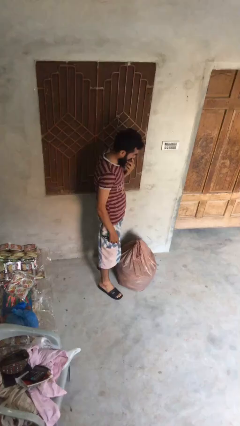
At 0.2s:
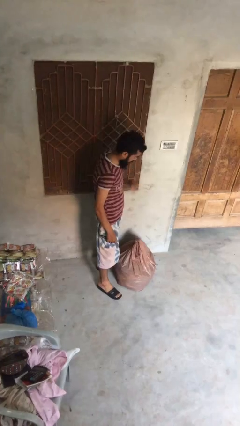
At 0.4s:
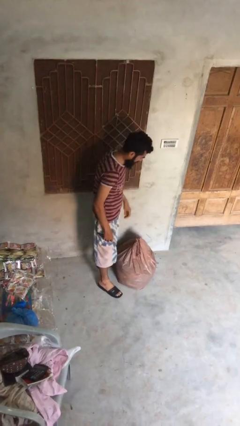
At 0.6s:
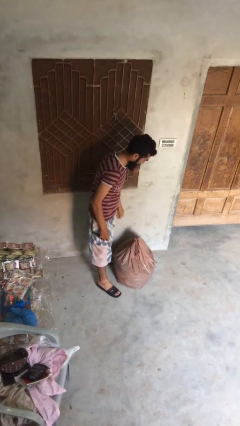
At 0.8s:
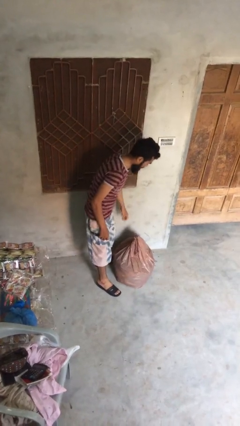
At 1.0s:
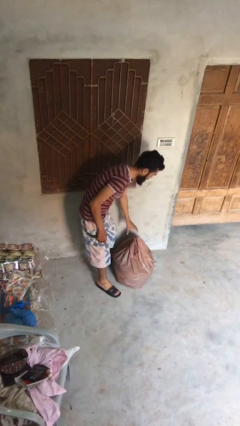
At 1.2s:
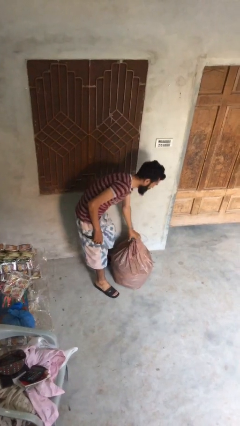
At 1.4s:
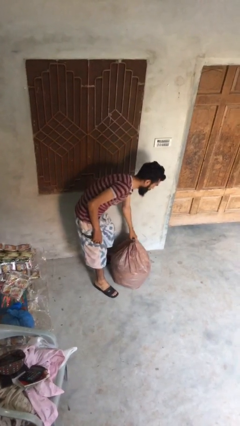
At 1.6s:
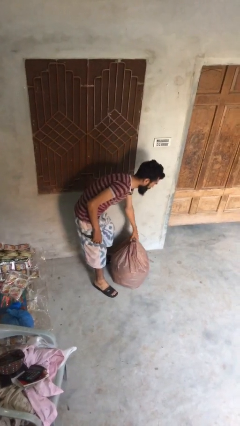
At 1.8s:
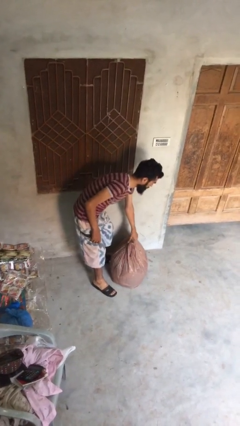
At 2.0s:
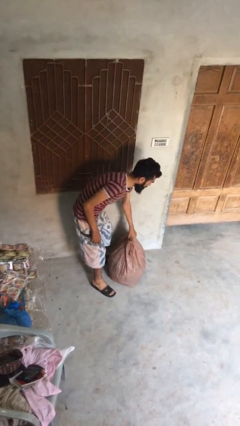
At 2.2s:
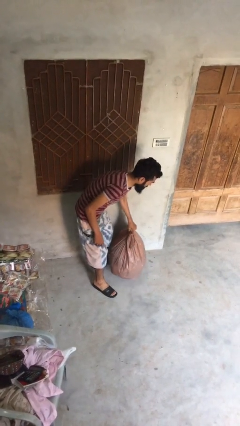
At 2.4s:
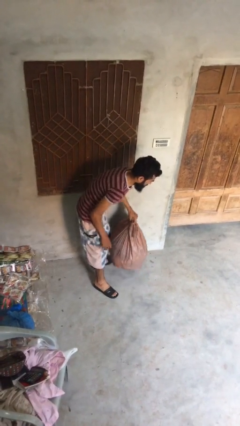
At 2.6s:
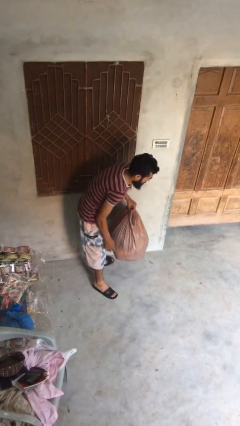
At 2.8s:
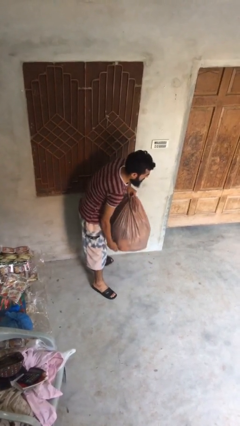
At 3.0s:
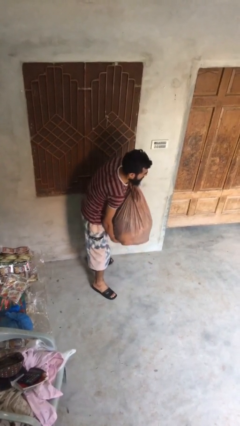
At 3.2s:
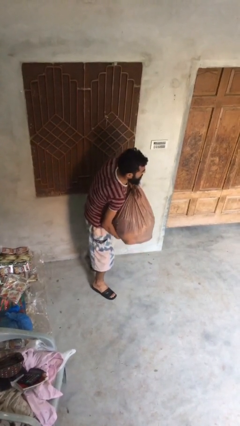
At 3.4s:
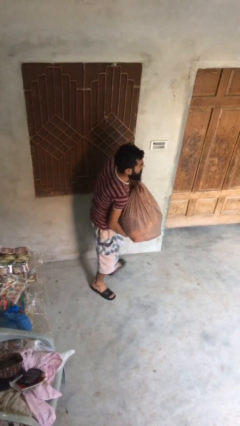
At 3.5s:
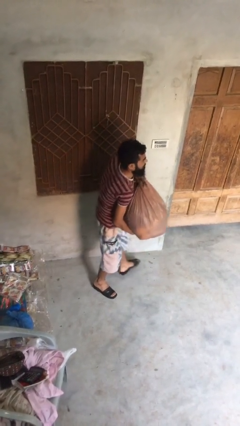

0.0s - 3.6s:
person picks up object from floor

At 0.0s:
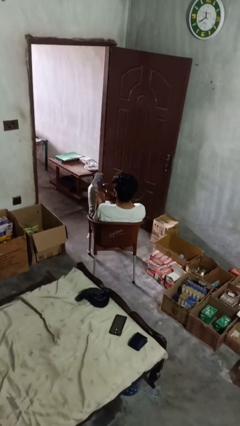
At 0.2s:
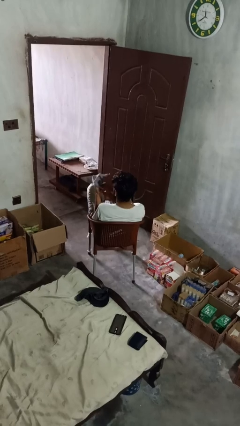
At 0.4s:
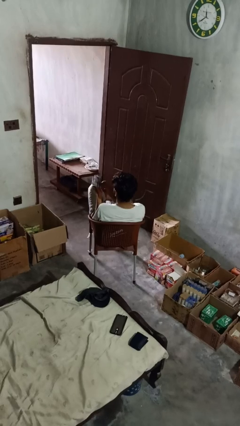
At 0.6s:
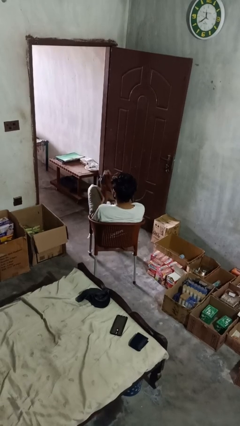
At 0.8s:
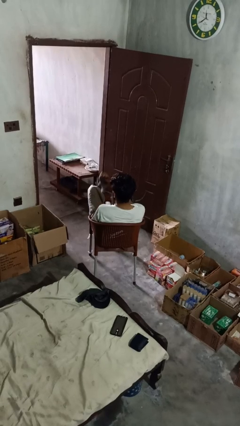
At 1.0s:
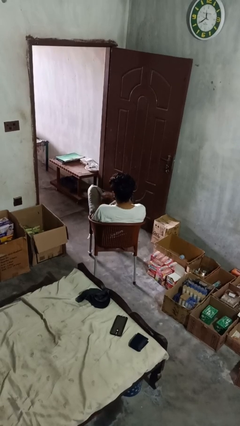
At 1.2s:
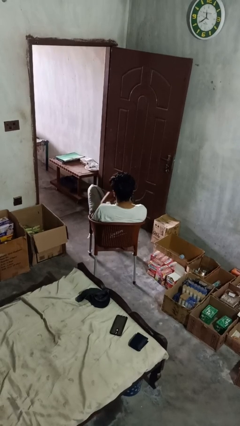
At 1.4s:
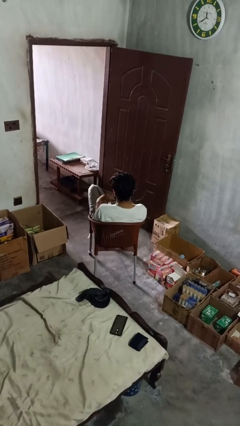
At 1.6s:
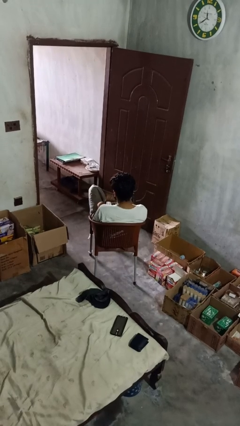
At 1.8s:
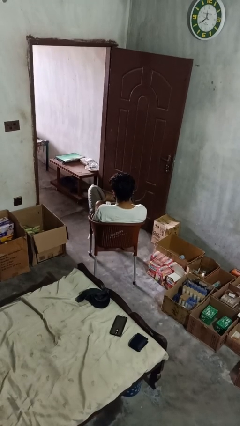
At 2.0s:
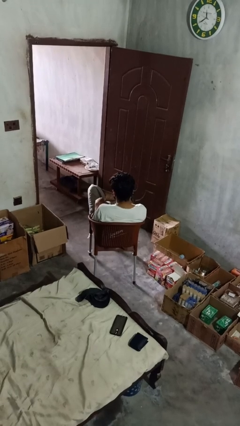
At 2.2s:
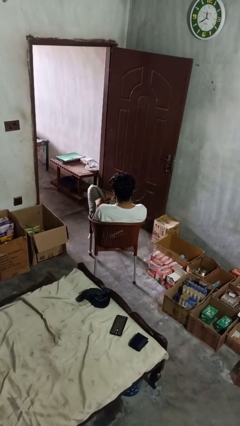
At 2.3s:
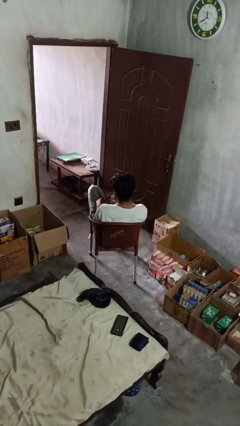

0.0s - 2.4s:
person takes off gloves

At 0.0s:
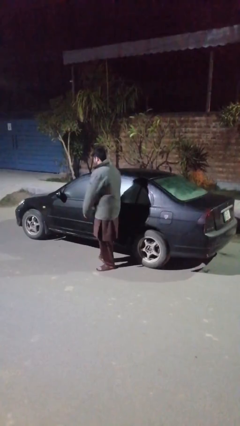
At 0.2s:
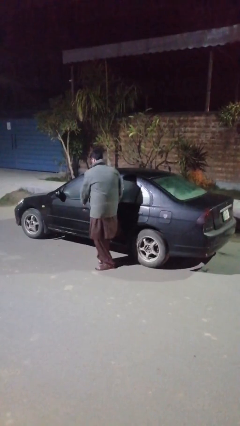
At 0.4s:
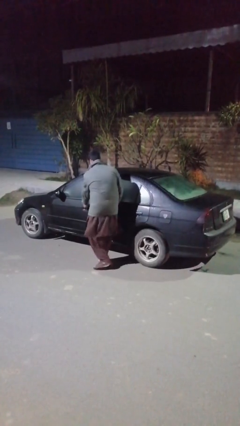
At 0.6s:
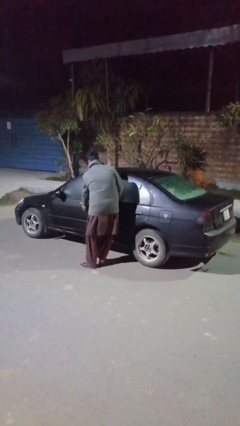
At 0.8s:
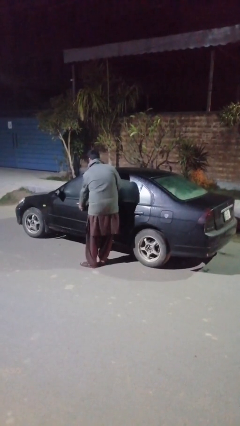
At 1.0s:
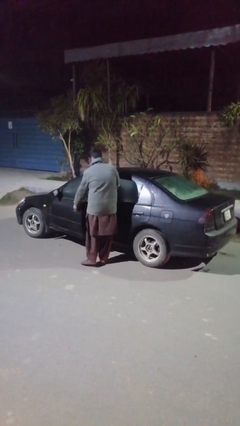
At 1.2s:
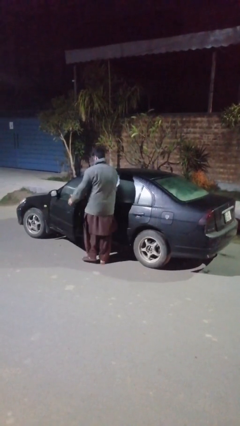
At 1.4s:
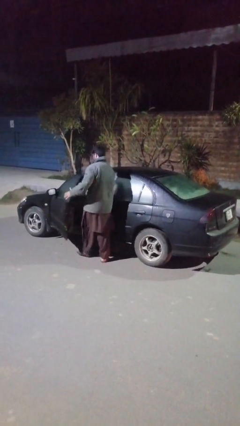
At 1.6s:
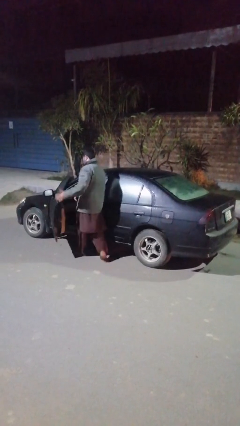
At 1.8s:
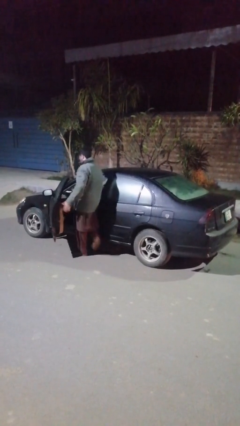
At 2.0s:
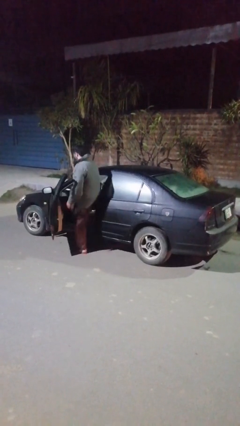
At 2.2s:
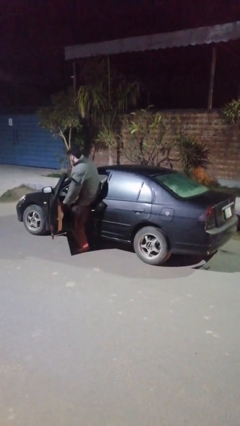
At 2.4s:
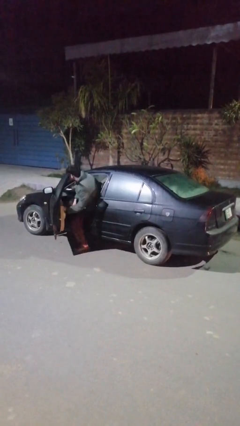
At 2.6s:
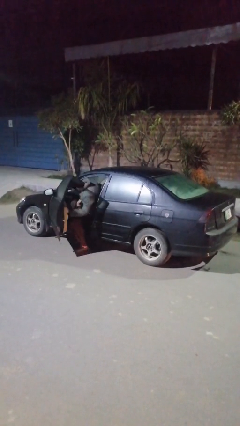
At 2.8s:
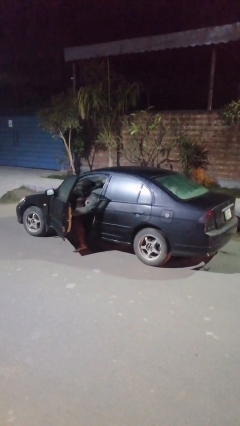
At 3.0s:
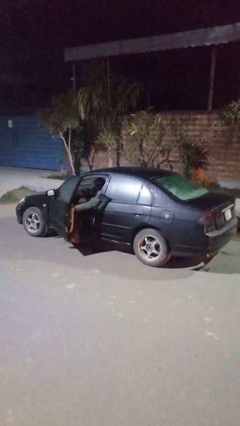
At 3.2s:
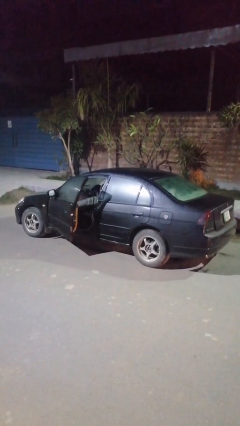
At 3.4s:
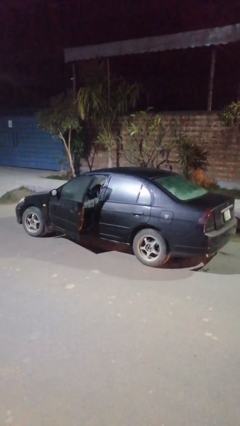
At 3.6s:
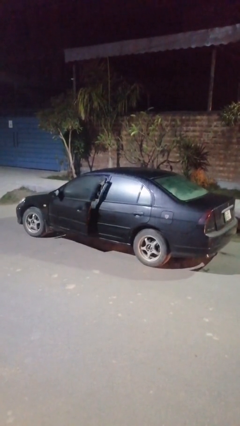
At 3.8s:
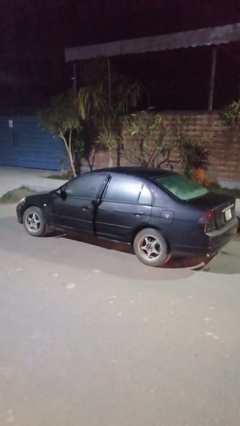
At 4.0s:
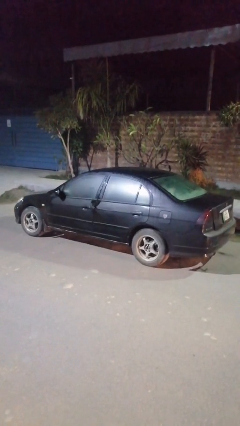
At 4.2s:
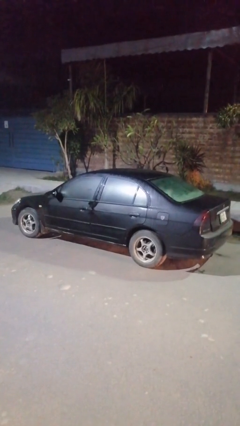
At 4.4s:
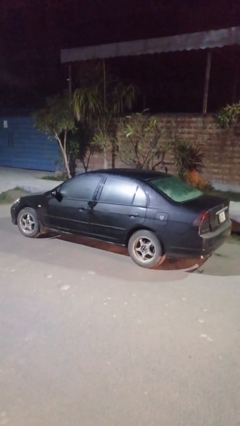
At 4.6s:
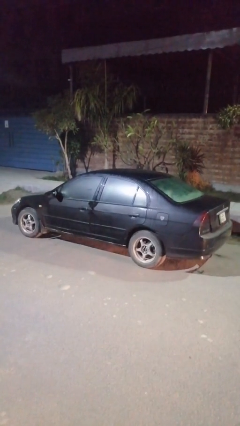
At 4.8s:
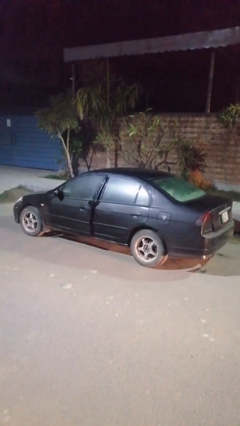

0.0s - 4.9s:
car picks up person

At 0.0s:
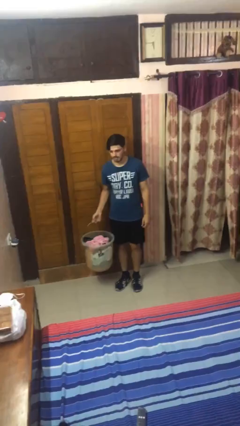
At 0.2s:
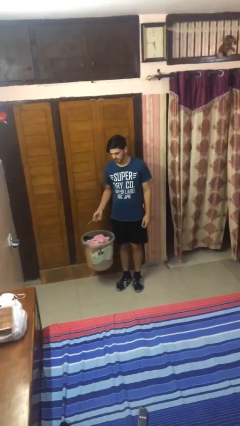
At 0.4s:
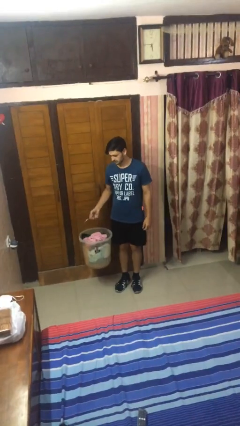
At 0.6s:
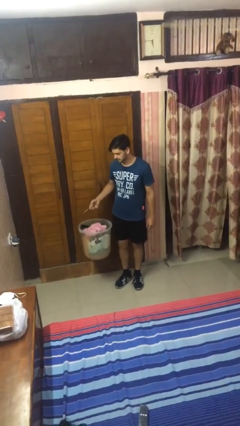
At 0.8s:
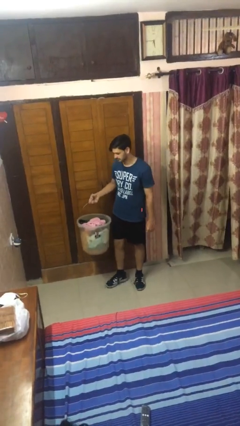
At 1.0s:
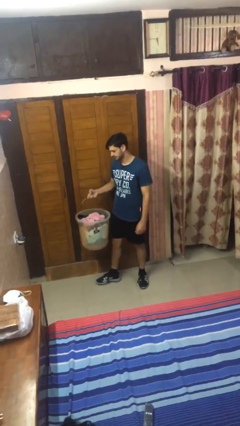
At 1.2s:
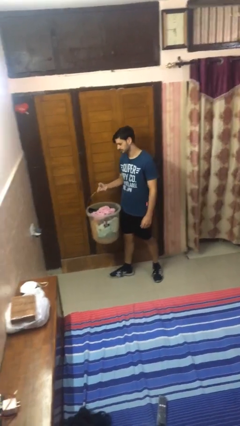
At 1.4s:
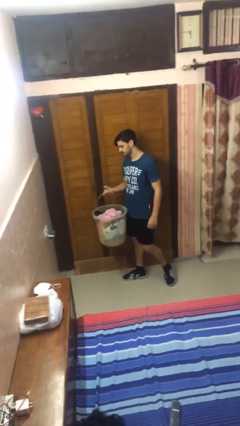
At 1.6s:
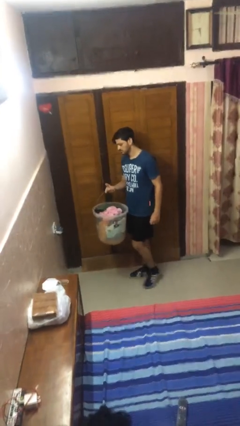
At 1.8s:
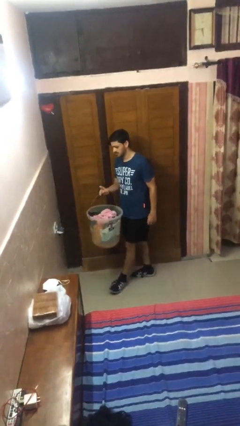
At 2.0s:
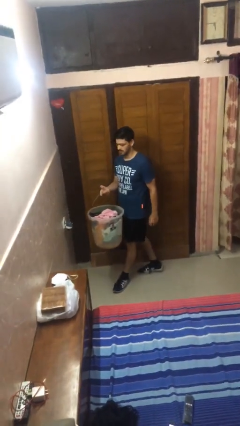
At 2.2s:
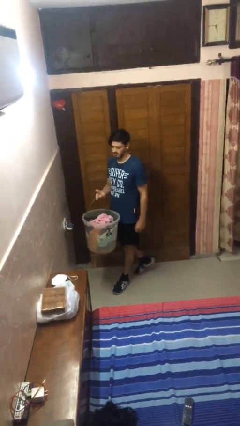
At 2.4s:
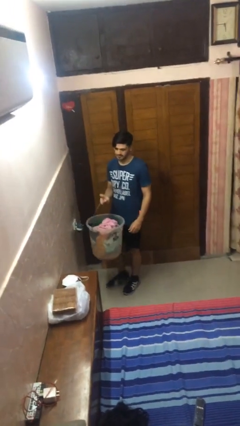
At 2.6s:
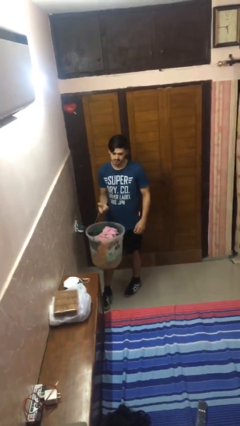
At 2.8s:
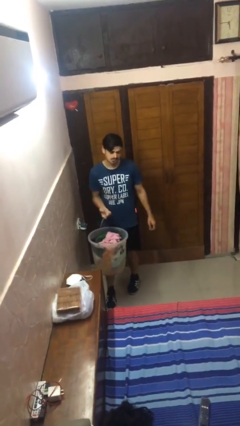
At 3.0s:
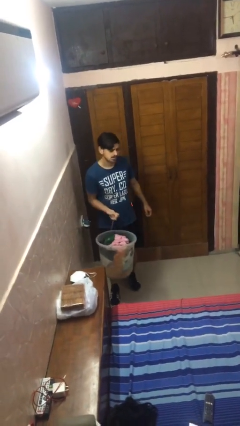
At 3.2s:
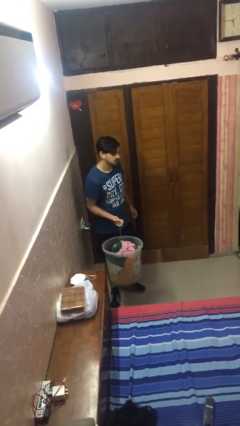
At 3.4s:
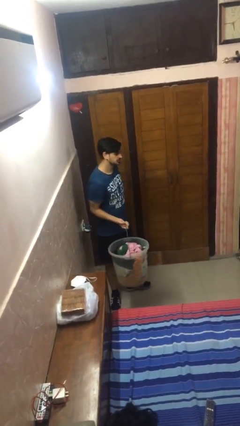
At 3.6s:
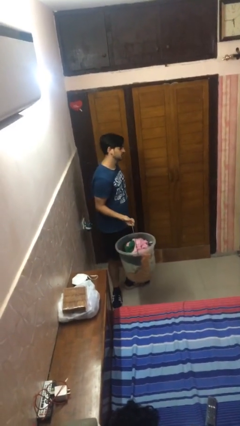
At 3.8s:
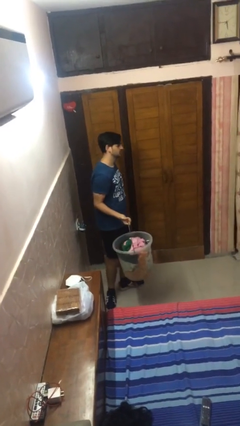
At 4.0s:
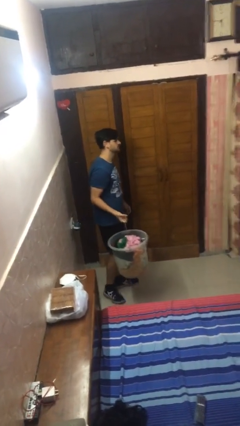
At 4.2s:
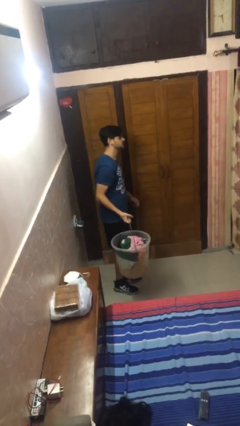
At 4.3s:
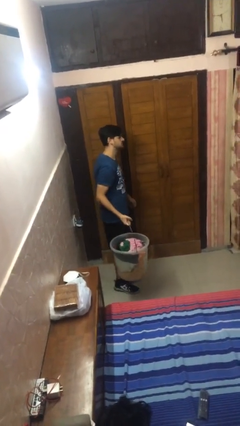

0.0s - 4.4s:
person carries laundry basket

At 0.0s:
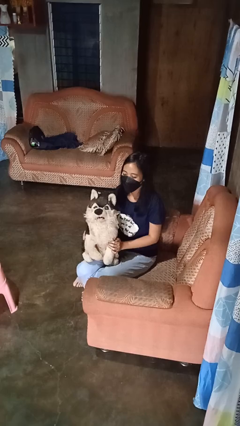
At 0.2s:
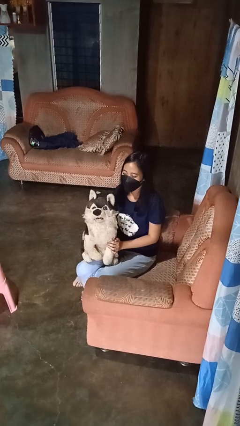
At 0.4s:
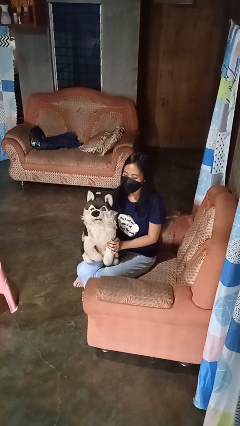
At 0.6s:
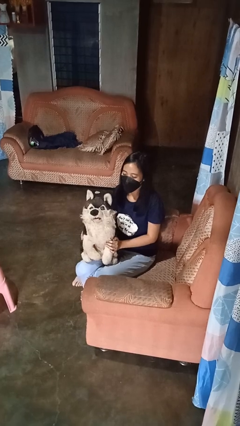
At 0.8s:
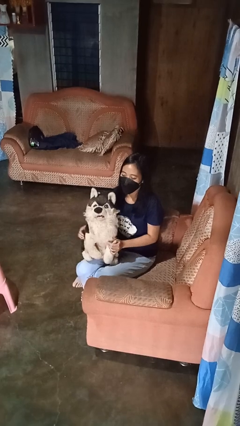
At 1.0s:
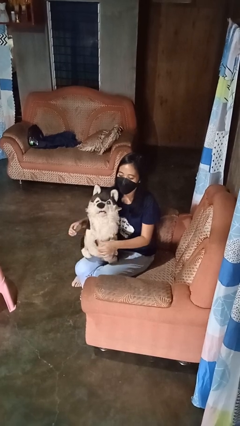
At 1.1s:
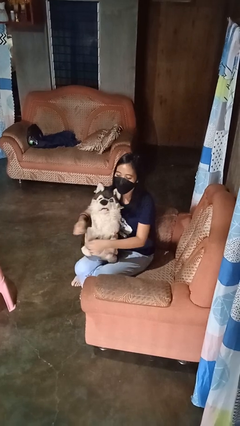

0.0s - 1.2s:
person hugs stuffed animal

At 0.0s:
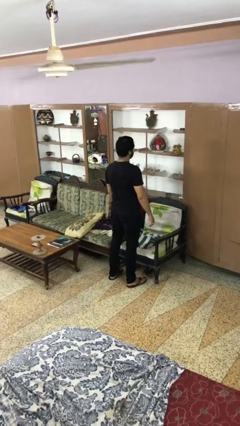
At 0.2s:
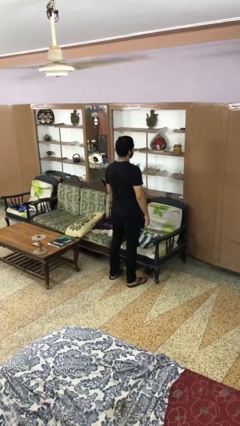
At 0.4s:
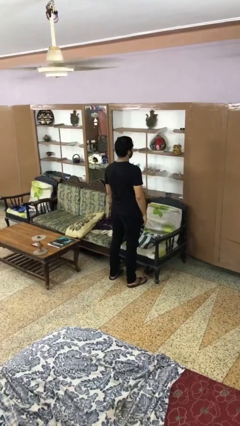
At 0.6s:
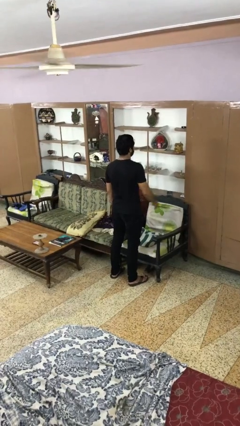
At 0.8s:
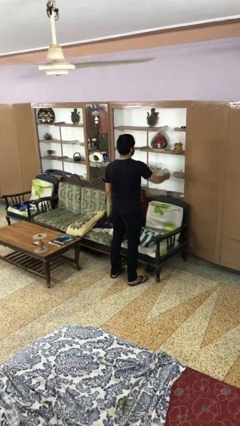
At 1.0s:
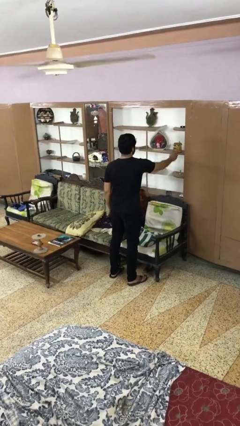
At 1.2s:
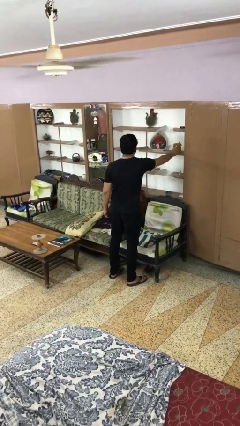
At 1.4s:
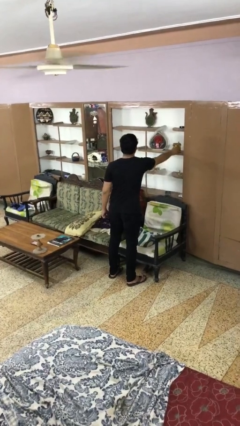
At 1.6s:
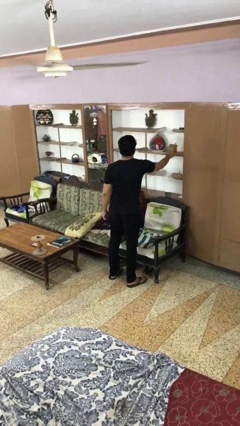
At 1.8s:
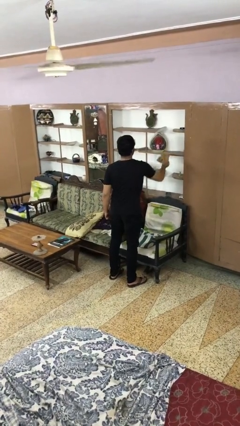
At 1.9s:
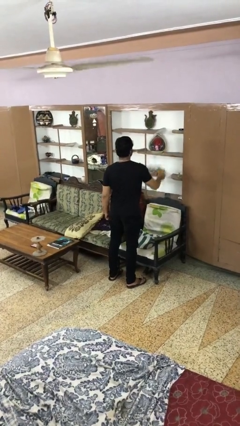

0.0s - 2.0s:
person picks up object from shelf
